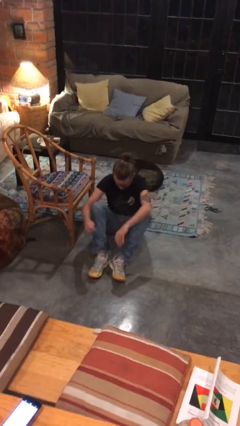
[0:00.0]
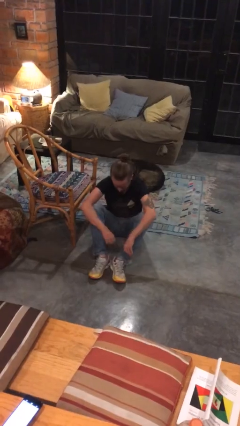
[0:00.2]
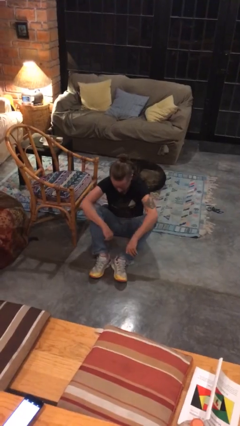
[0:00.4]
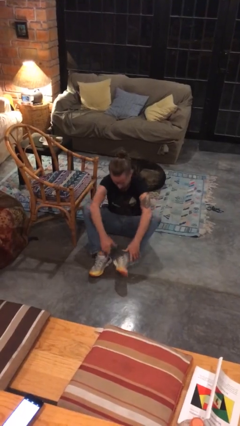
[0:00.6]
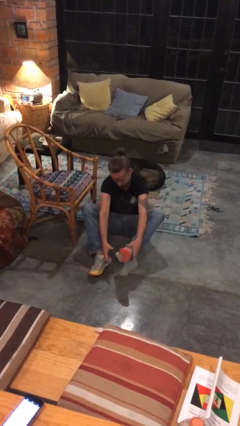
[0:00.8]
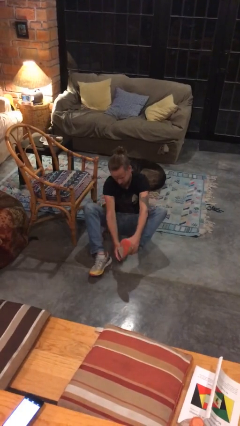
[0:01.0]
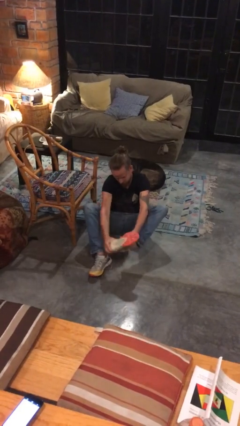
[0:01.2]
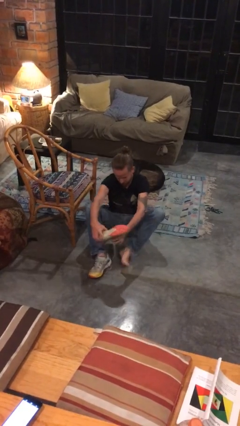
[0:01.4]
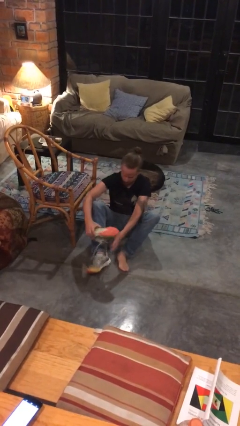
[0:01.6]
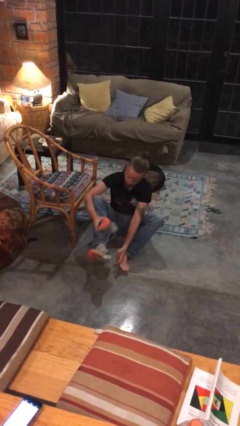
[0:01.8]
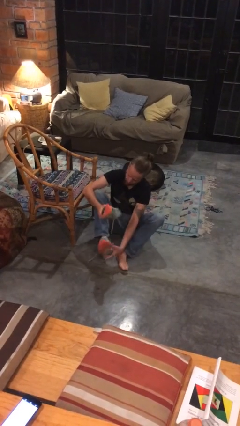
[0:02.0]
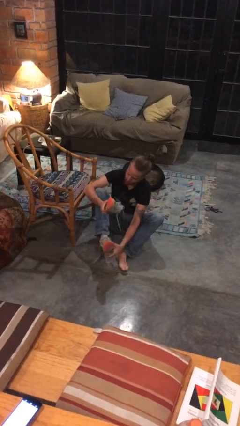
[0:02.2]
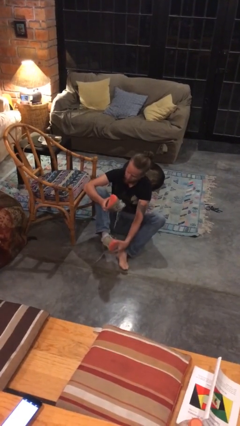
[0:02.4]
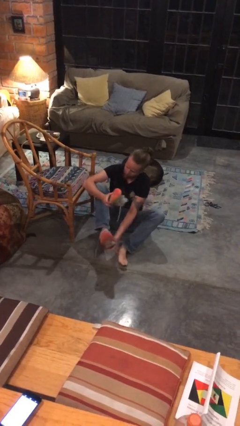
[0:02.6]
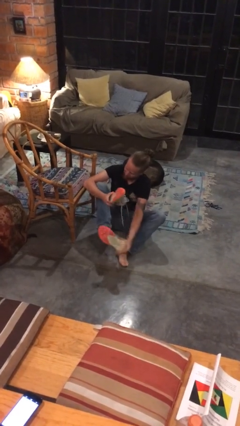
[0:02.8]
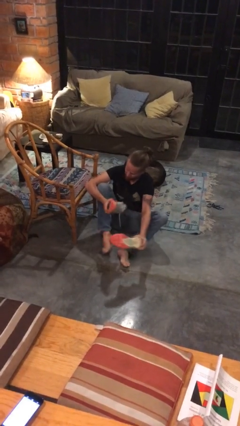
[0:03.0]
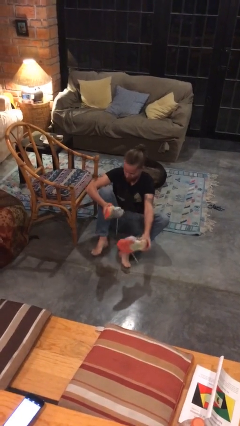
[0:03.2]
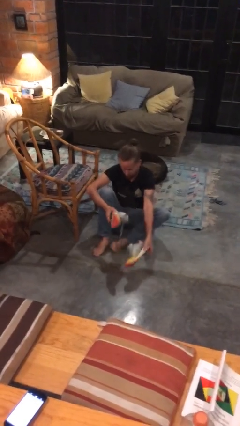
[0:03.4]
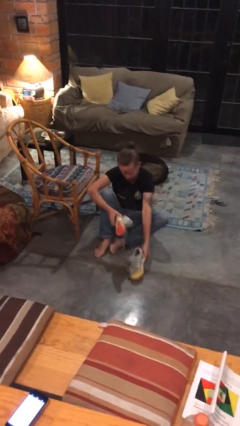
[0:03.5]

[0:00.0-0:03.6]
person takes off shoes

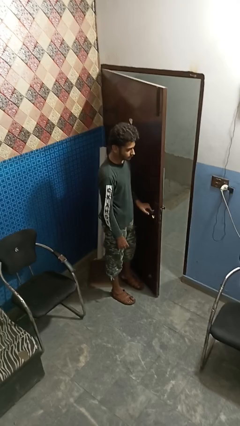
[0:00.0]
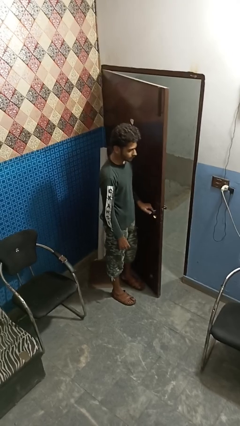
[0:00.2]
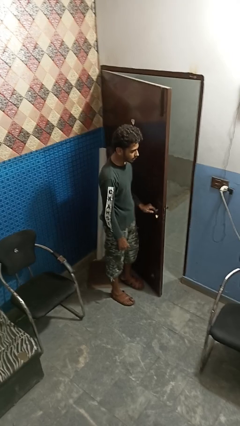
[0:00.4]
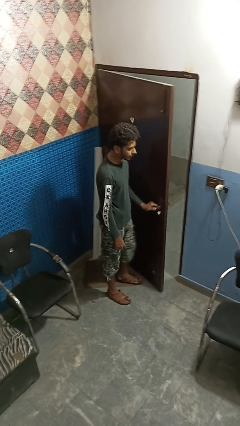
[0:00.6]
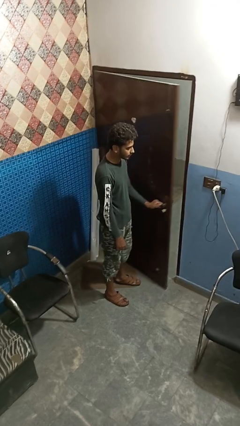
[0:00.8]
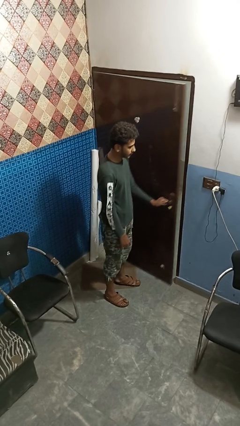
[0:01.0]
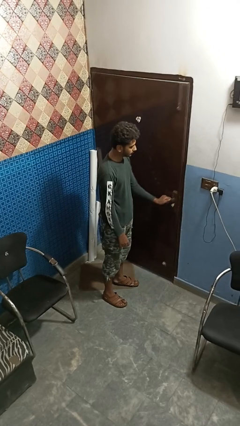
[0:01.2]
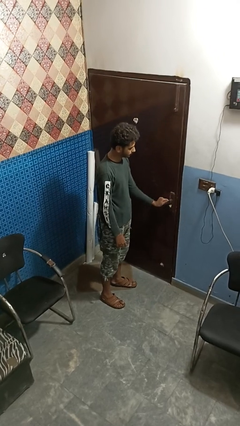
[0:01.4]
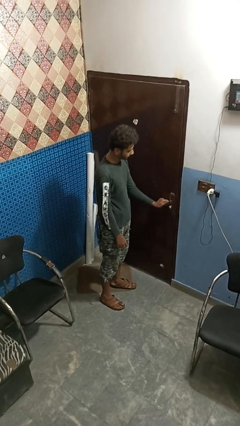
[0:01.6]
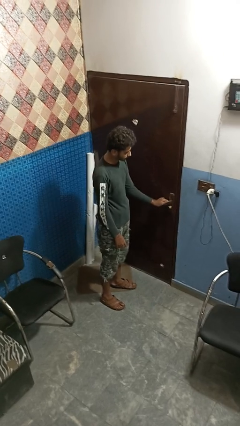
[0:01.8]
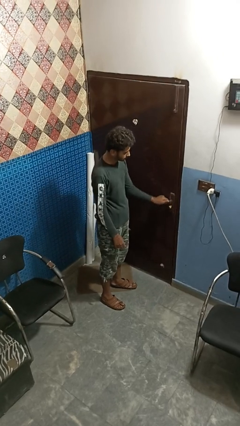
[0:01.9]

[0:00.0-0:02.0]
person closes facility door

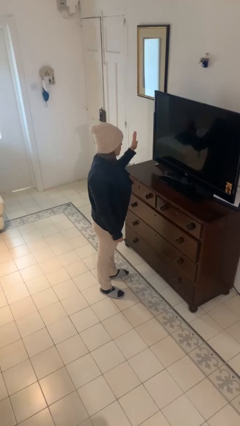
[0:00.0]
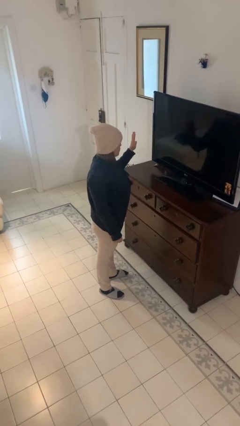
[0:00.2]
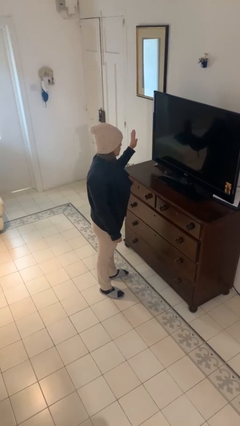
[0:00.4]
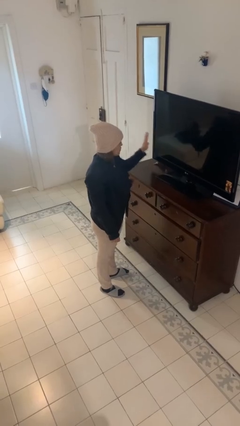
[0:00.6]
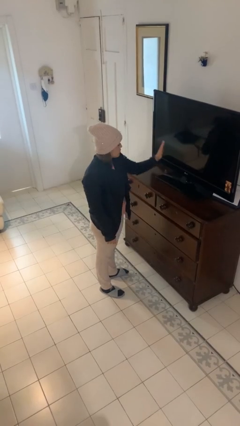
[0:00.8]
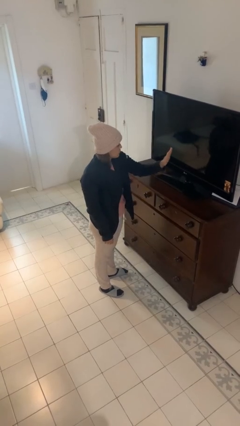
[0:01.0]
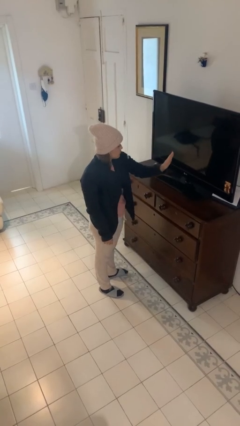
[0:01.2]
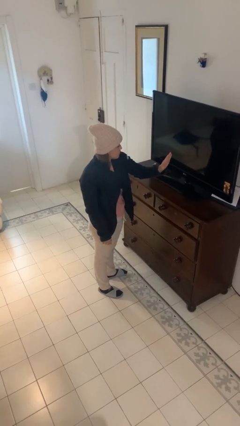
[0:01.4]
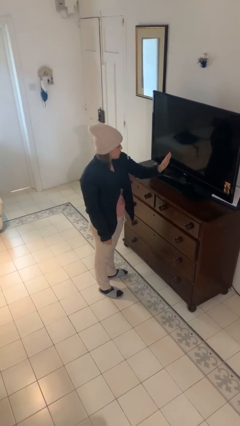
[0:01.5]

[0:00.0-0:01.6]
person gestures swipe left

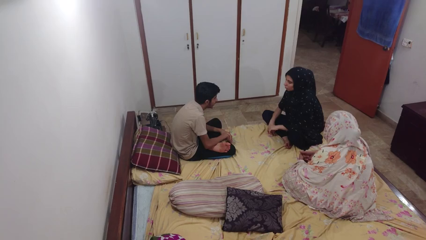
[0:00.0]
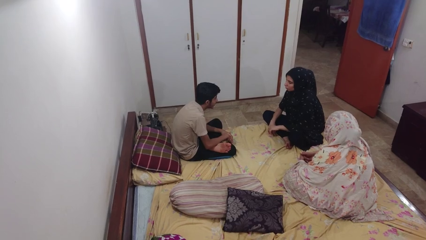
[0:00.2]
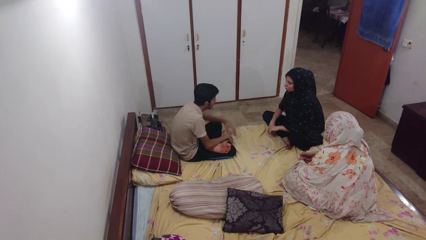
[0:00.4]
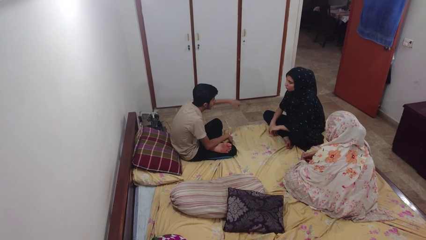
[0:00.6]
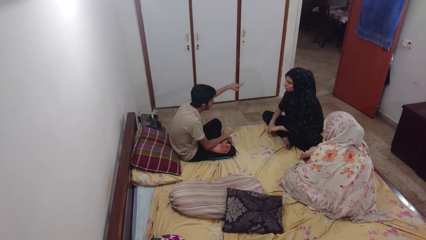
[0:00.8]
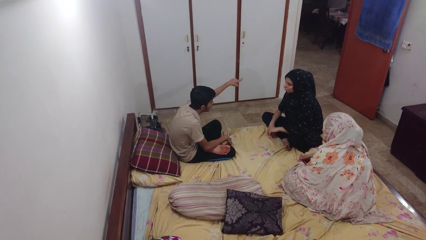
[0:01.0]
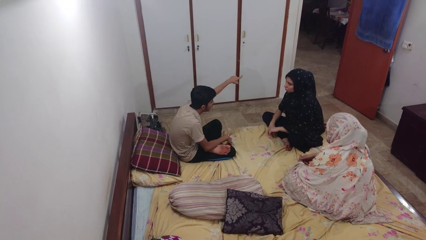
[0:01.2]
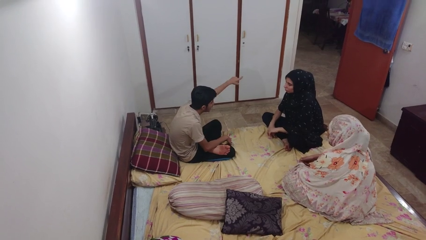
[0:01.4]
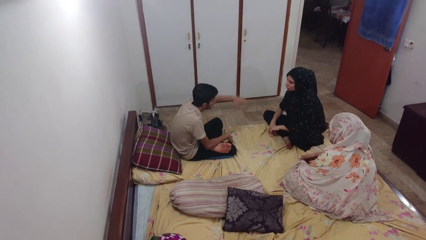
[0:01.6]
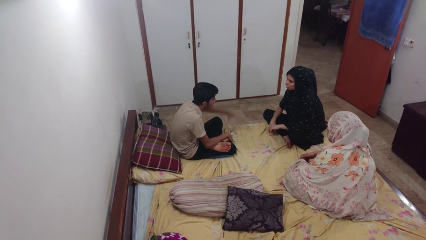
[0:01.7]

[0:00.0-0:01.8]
person points at person

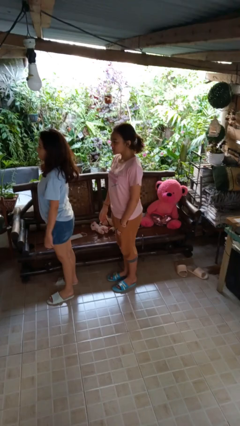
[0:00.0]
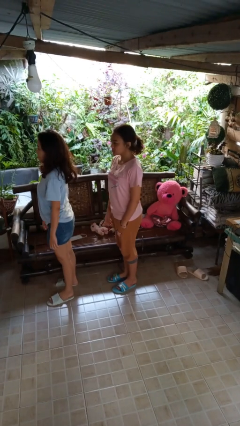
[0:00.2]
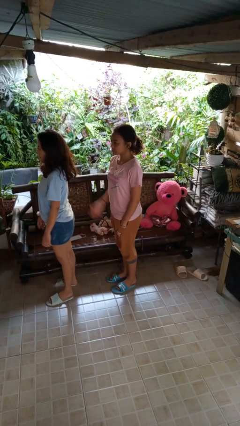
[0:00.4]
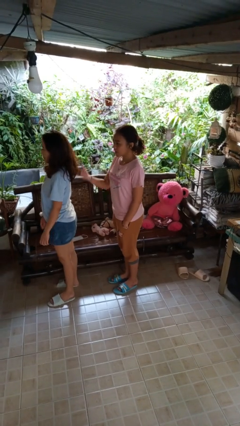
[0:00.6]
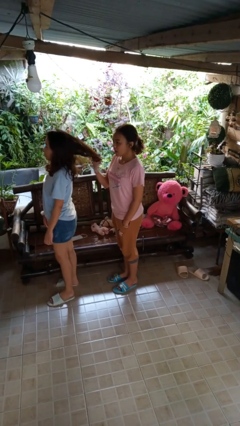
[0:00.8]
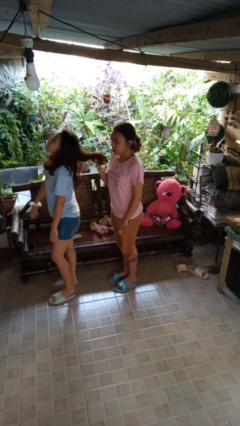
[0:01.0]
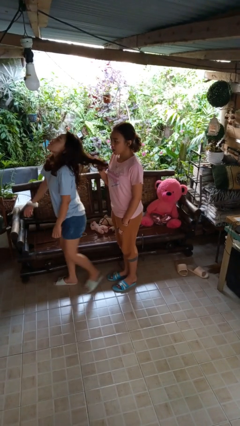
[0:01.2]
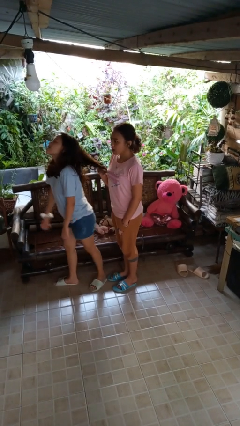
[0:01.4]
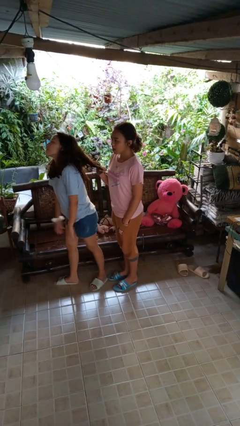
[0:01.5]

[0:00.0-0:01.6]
person grabs person by hair

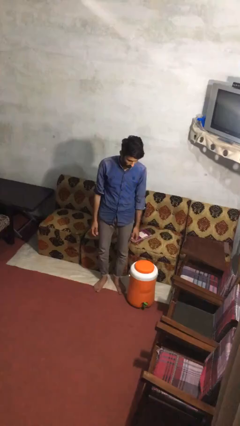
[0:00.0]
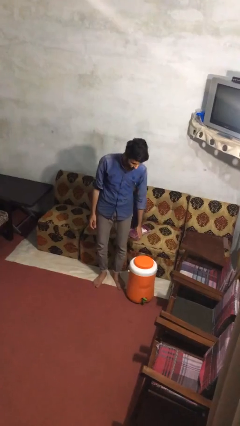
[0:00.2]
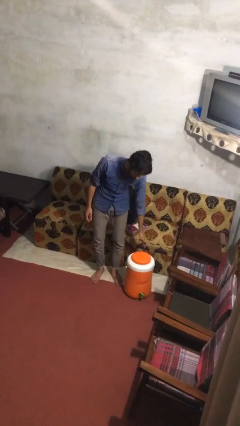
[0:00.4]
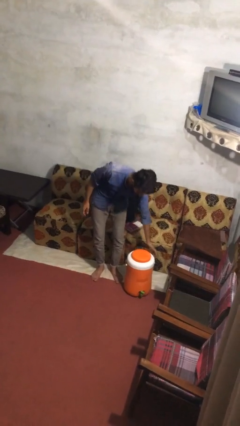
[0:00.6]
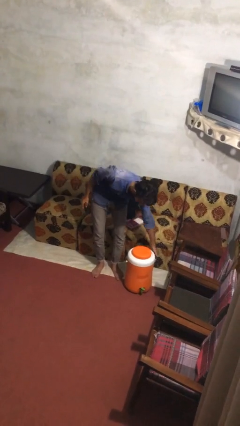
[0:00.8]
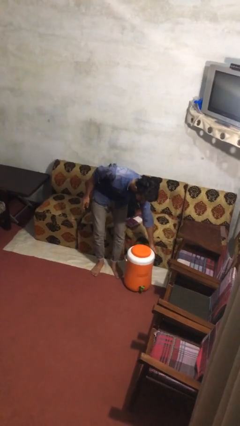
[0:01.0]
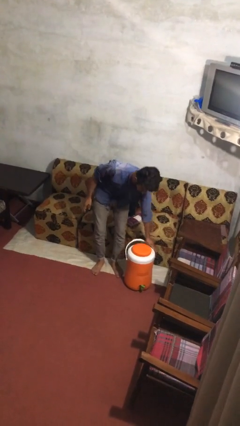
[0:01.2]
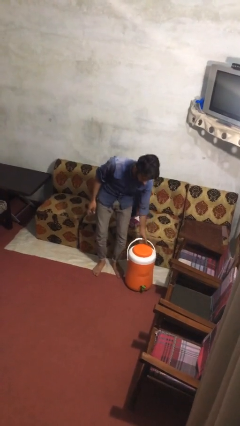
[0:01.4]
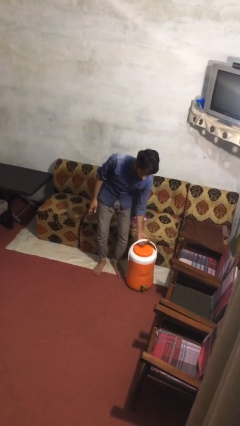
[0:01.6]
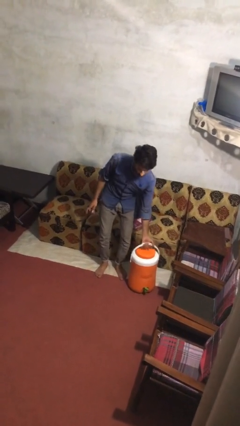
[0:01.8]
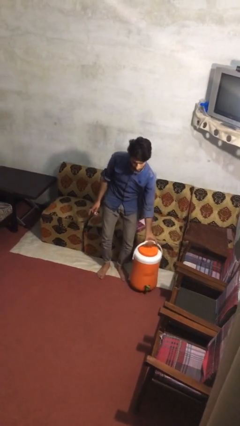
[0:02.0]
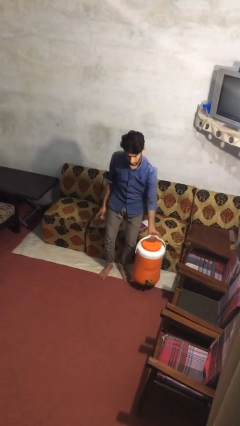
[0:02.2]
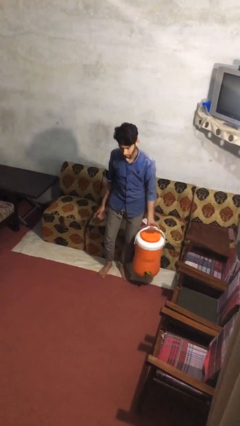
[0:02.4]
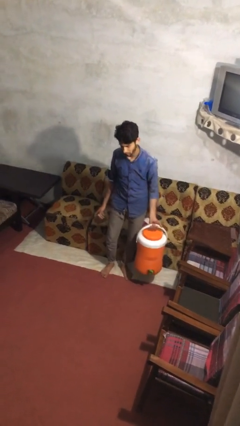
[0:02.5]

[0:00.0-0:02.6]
person picks up object from floor

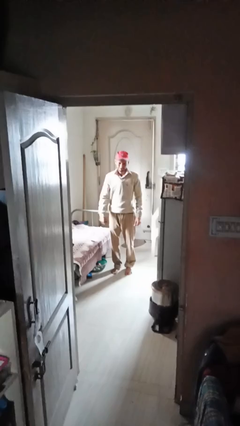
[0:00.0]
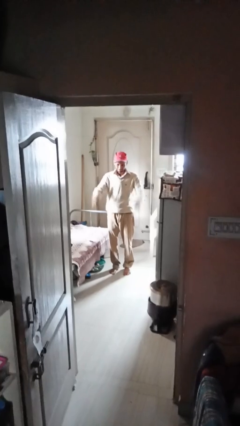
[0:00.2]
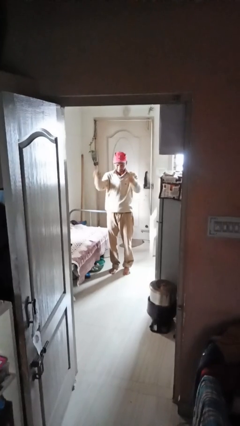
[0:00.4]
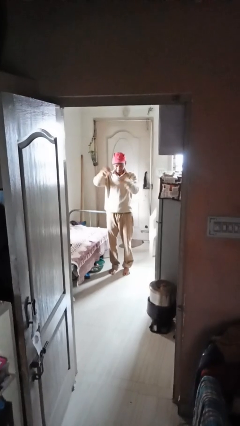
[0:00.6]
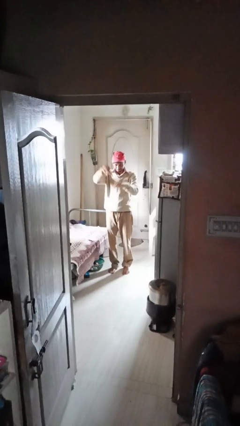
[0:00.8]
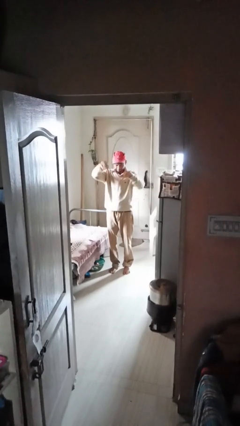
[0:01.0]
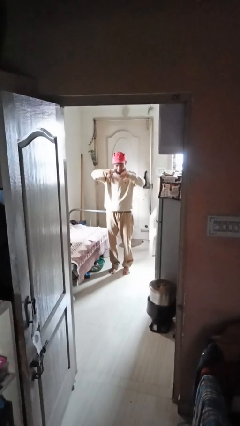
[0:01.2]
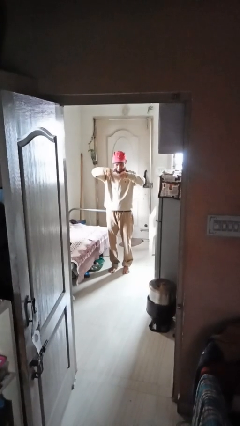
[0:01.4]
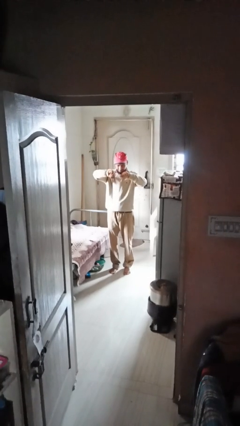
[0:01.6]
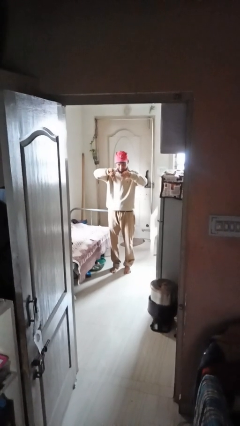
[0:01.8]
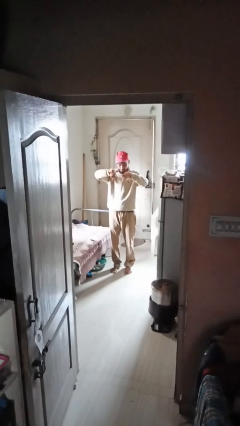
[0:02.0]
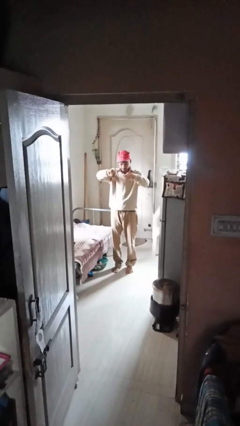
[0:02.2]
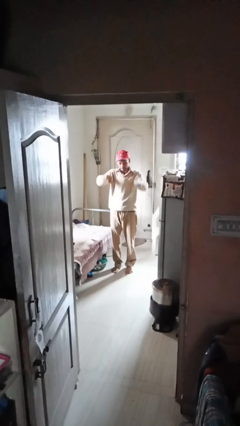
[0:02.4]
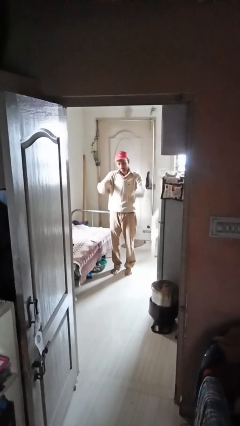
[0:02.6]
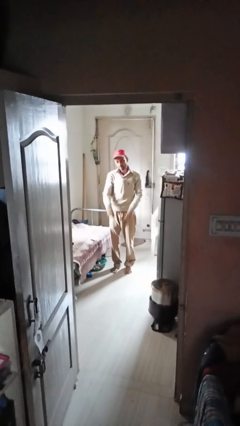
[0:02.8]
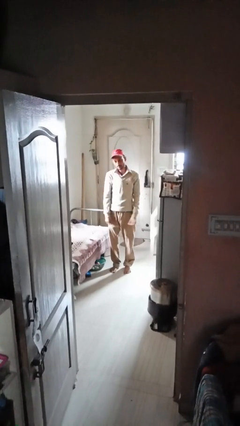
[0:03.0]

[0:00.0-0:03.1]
person gestures thumbs down

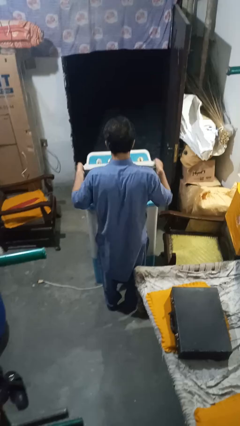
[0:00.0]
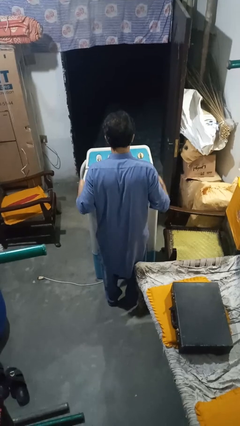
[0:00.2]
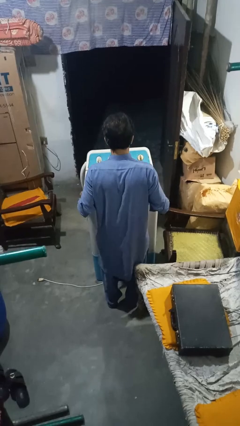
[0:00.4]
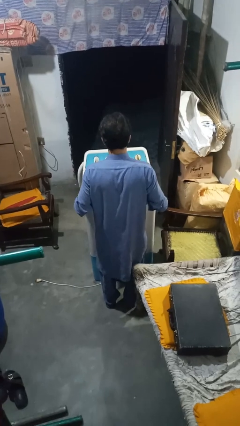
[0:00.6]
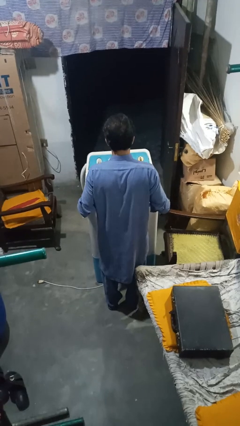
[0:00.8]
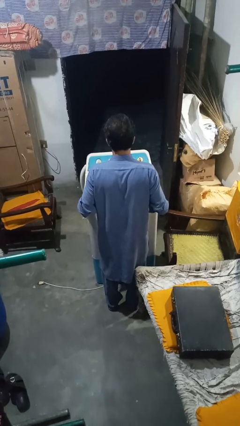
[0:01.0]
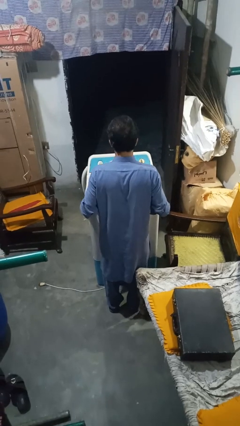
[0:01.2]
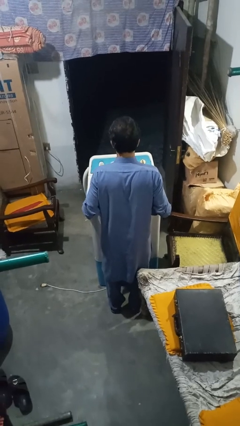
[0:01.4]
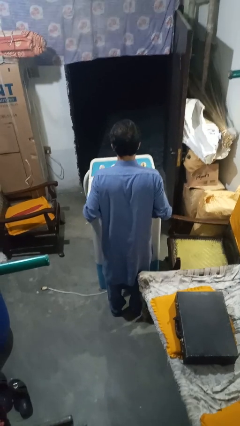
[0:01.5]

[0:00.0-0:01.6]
person closes clothes washer
